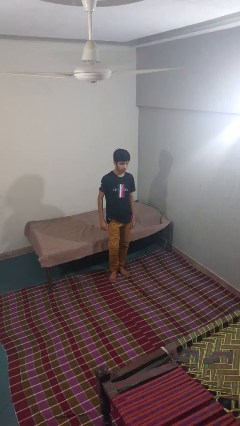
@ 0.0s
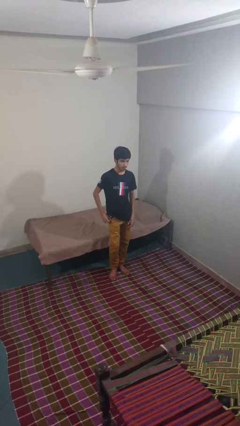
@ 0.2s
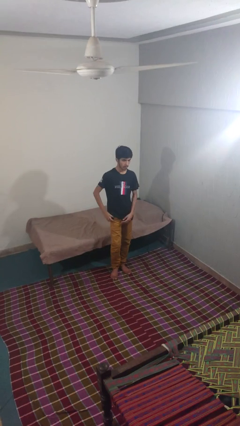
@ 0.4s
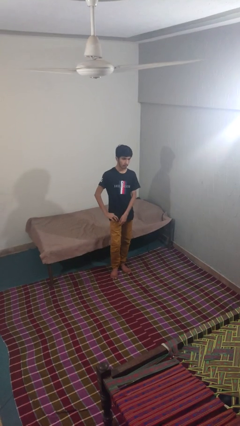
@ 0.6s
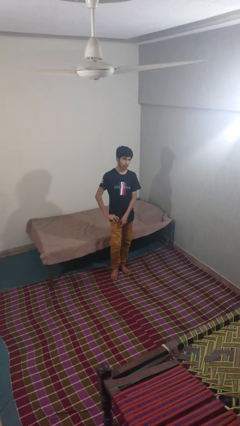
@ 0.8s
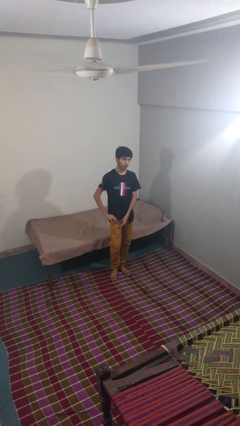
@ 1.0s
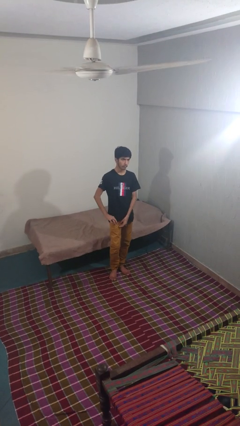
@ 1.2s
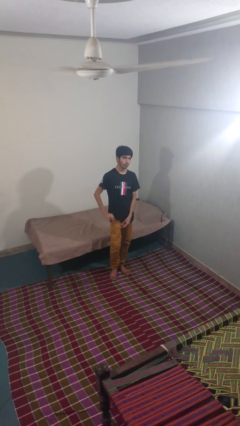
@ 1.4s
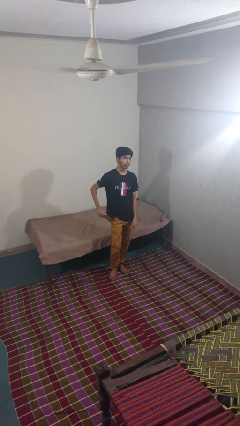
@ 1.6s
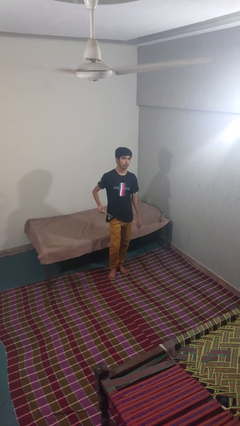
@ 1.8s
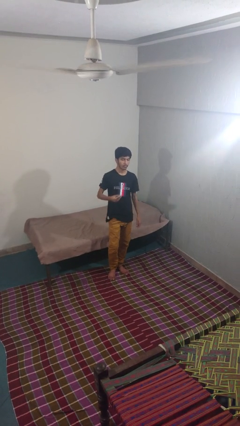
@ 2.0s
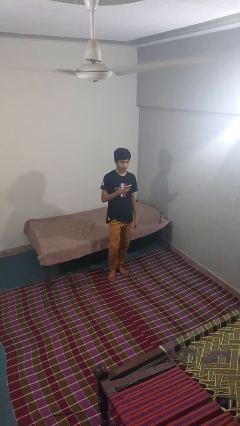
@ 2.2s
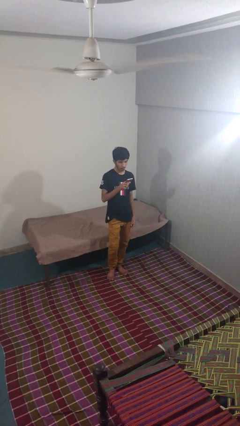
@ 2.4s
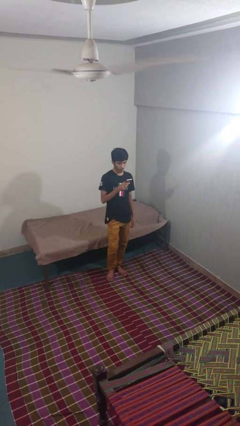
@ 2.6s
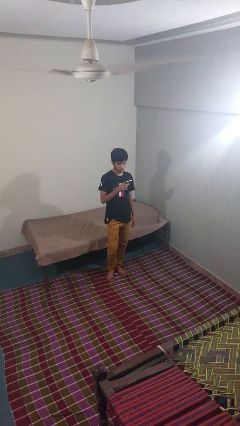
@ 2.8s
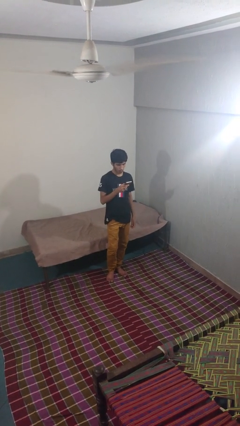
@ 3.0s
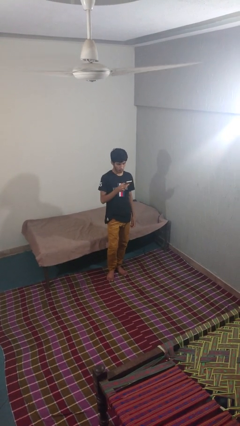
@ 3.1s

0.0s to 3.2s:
person takes phone from pocket

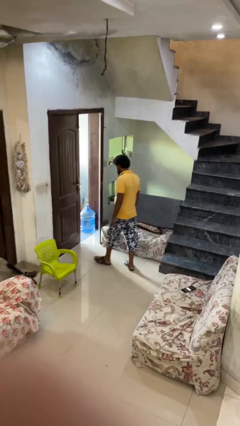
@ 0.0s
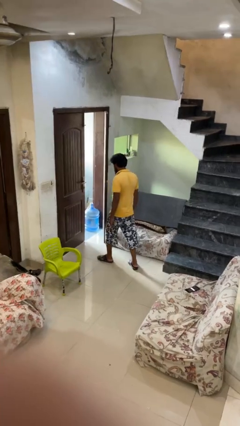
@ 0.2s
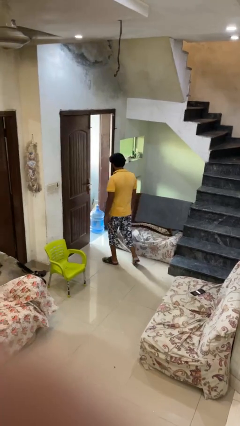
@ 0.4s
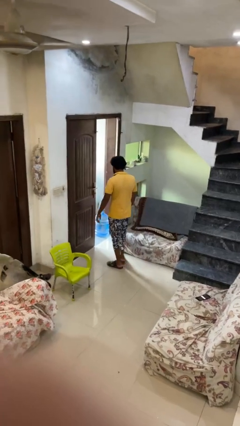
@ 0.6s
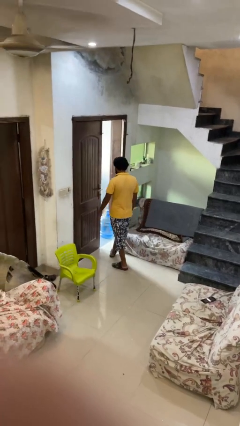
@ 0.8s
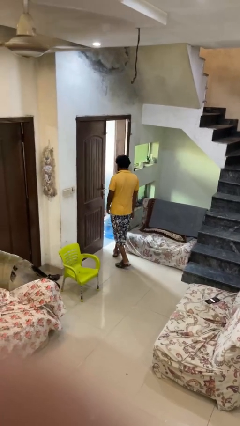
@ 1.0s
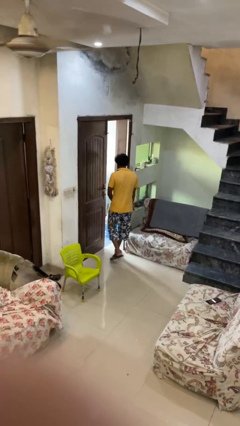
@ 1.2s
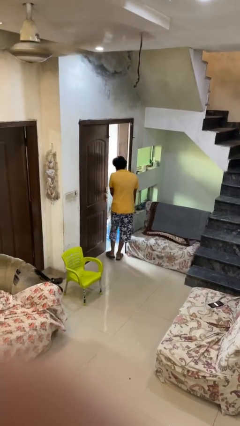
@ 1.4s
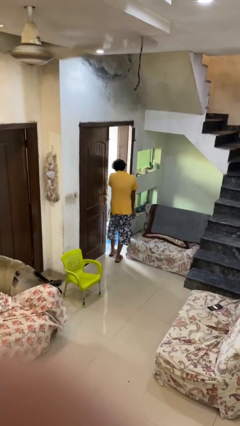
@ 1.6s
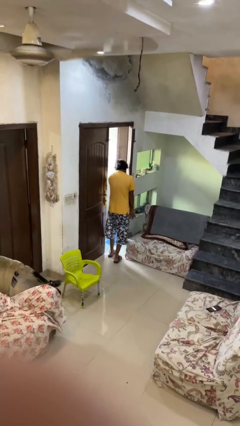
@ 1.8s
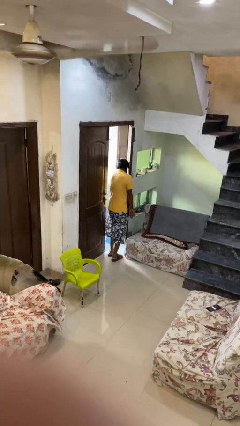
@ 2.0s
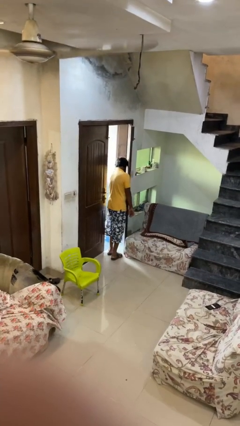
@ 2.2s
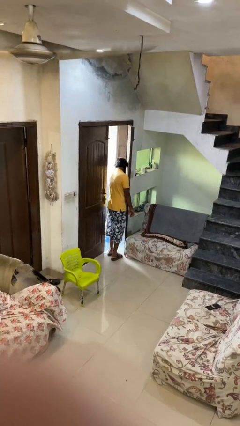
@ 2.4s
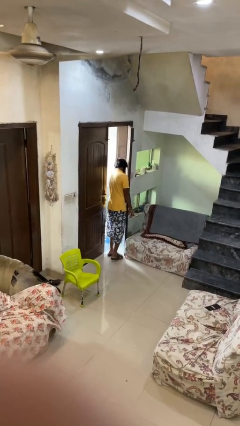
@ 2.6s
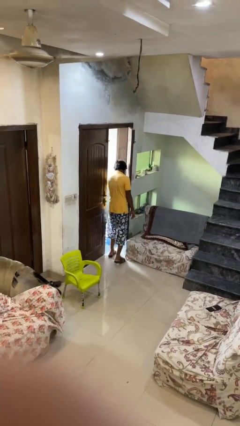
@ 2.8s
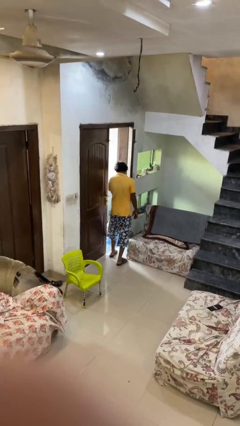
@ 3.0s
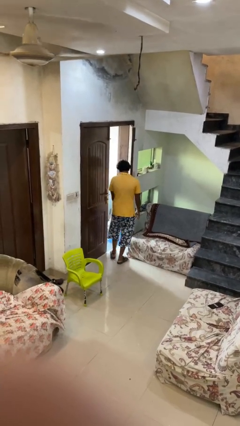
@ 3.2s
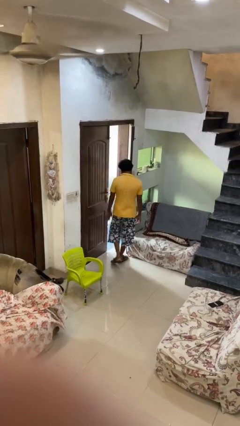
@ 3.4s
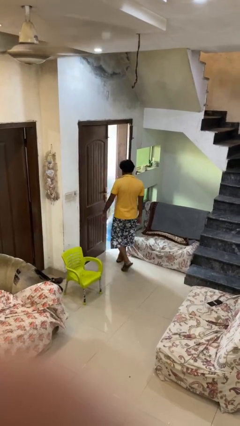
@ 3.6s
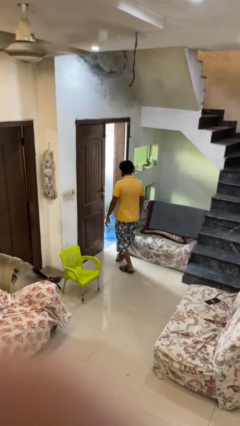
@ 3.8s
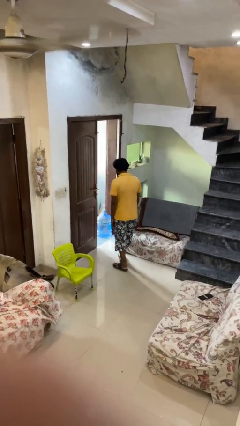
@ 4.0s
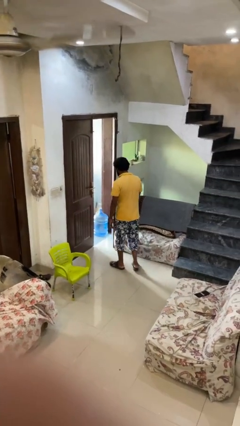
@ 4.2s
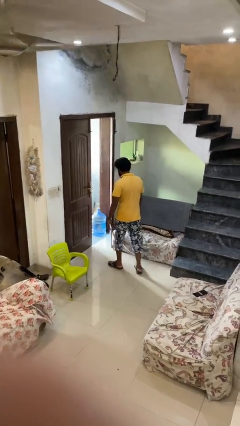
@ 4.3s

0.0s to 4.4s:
person bumps into wall

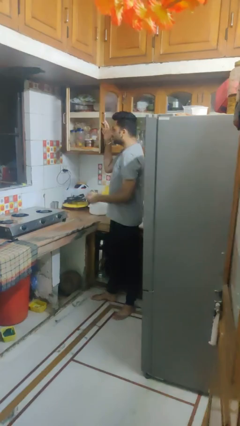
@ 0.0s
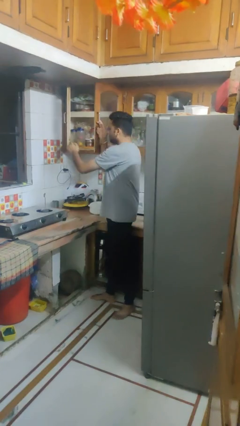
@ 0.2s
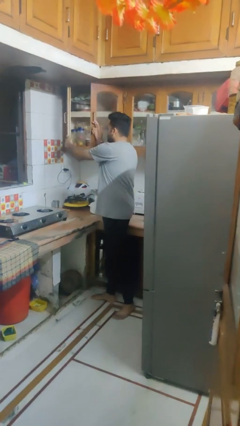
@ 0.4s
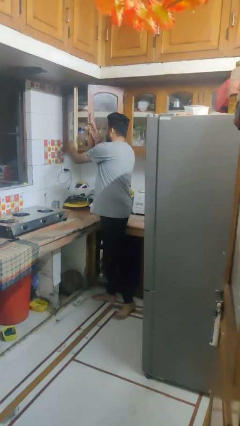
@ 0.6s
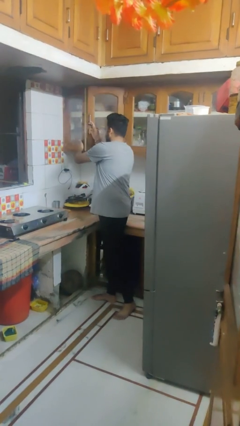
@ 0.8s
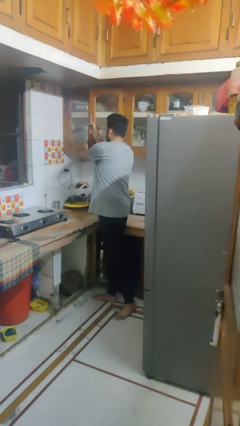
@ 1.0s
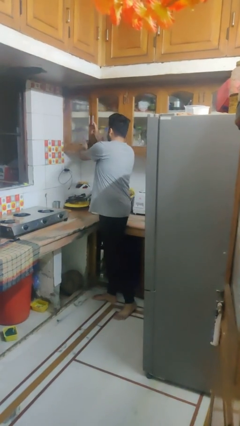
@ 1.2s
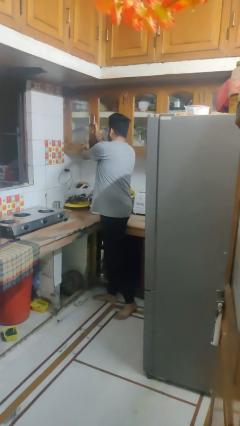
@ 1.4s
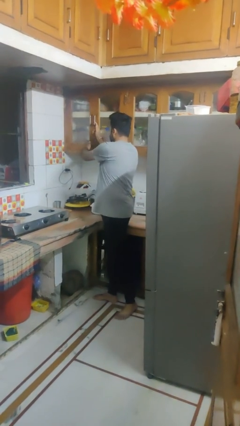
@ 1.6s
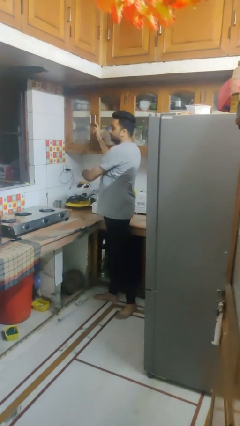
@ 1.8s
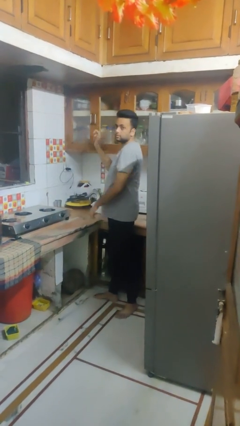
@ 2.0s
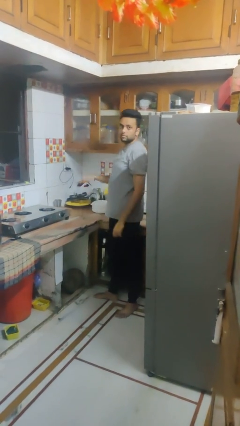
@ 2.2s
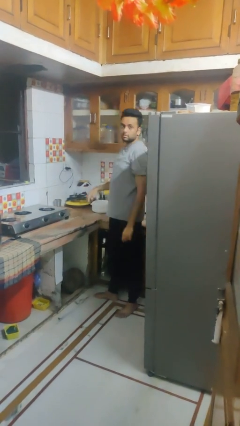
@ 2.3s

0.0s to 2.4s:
person closes cabinet

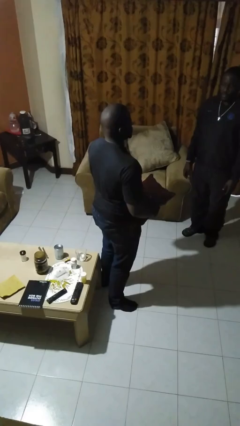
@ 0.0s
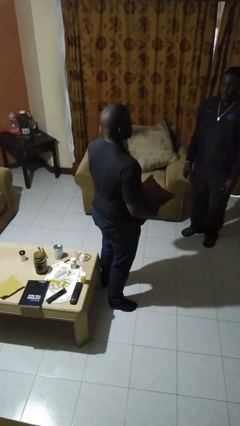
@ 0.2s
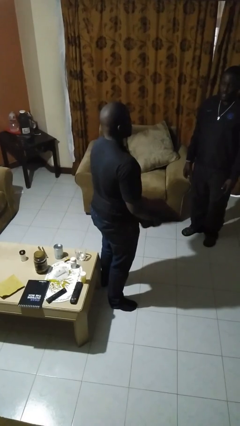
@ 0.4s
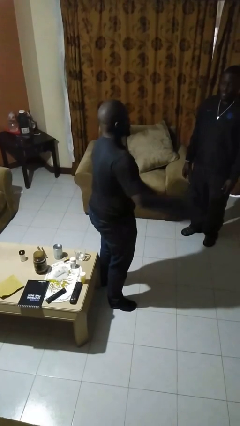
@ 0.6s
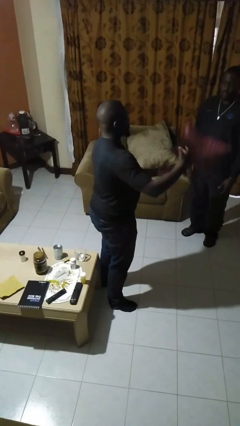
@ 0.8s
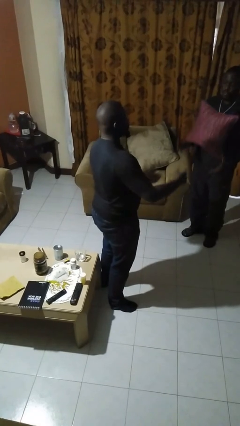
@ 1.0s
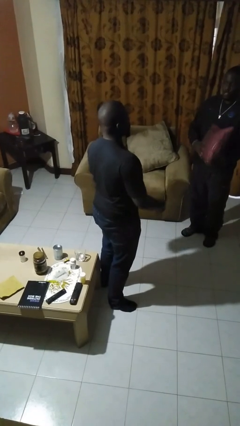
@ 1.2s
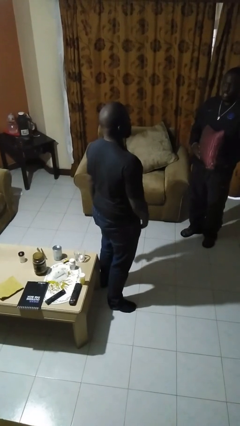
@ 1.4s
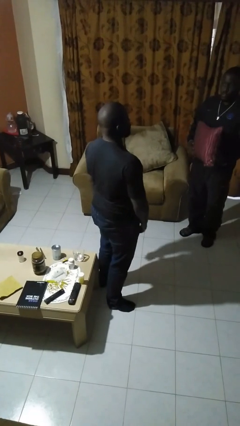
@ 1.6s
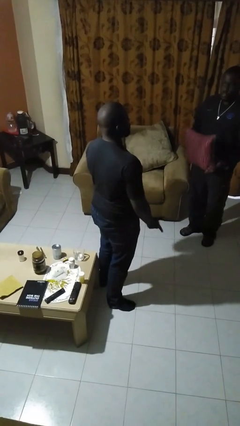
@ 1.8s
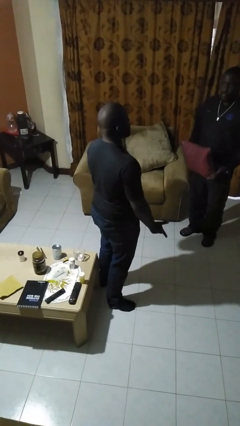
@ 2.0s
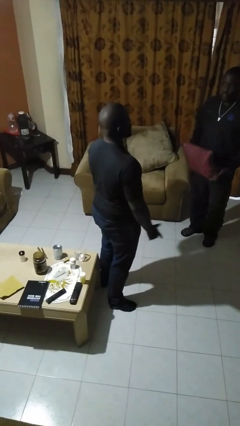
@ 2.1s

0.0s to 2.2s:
person throws object to person

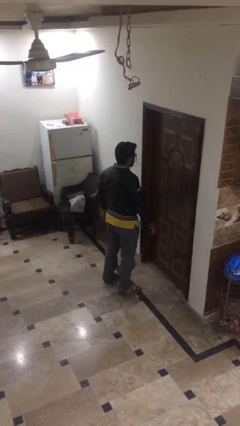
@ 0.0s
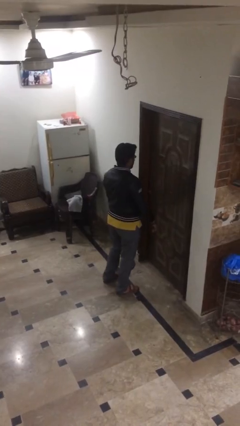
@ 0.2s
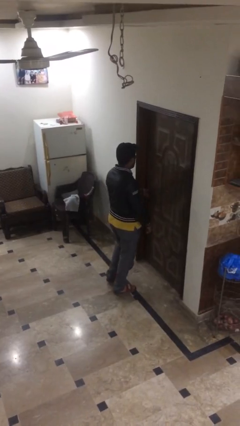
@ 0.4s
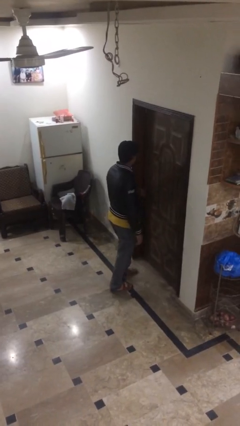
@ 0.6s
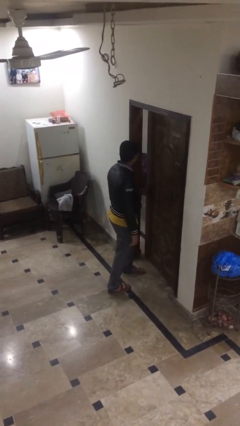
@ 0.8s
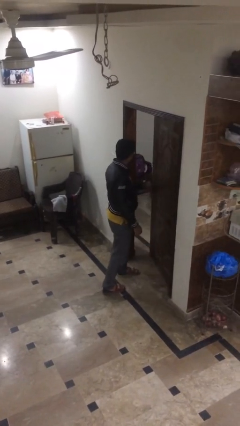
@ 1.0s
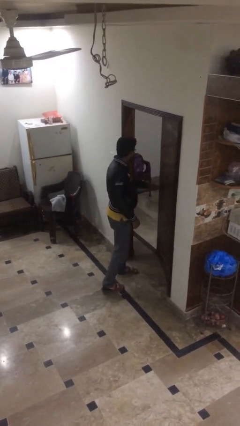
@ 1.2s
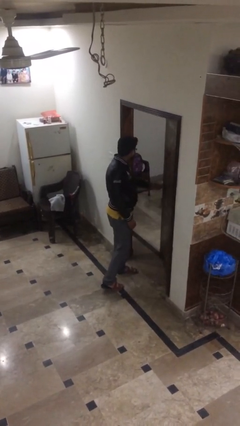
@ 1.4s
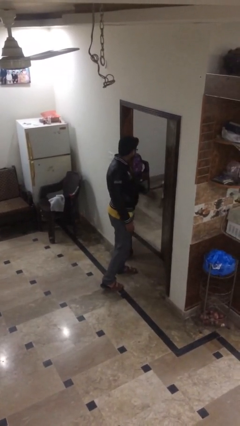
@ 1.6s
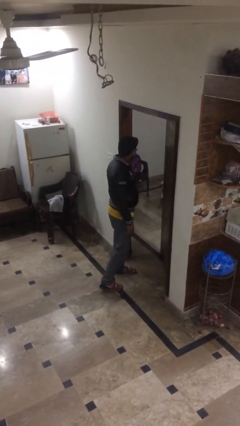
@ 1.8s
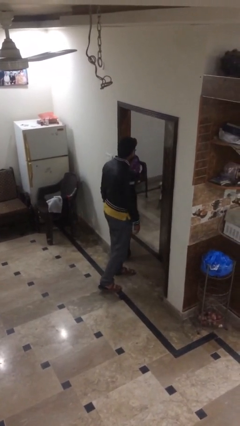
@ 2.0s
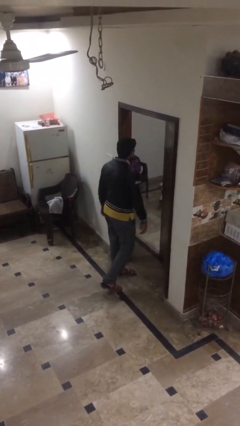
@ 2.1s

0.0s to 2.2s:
person opens facility door

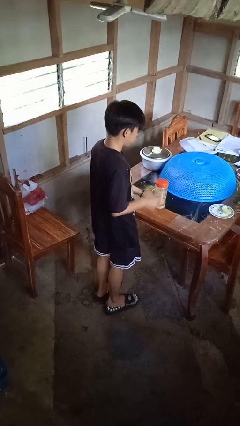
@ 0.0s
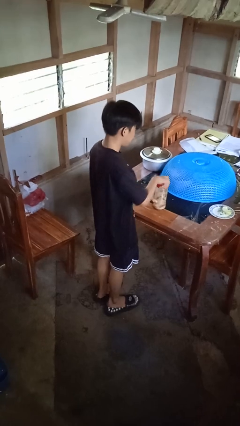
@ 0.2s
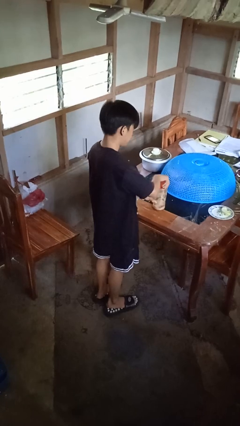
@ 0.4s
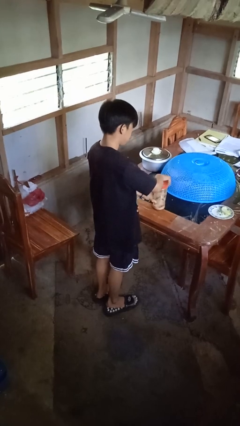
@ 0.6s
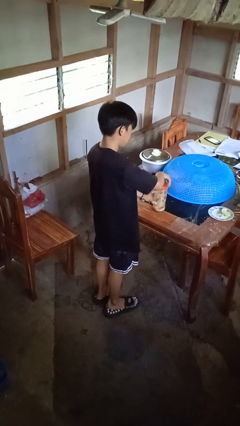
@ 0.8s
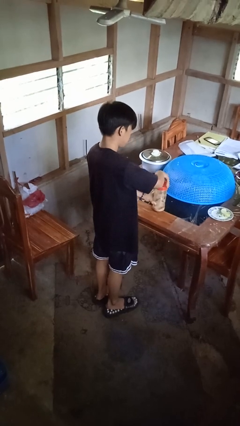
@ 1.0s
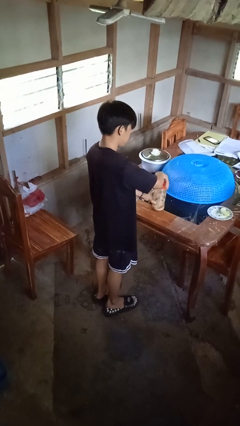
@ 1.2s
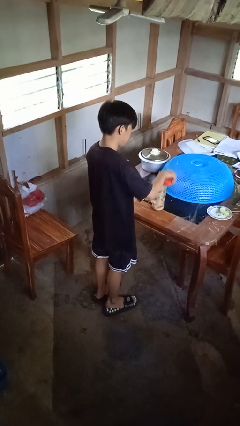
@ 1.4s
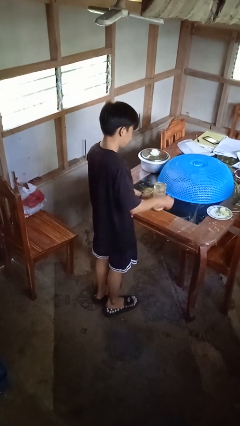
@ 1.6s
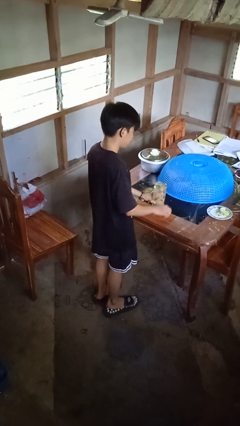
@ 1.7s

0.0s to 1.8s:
person opens jar

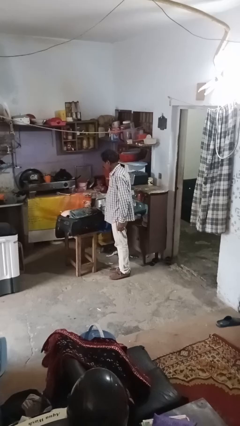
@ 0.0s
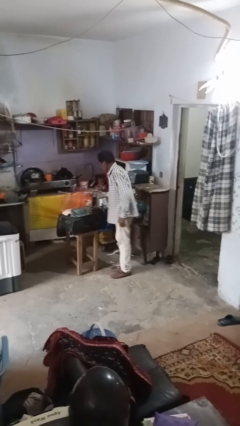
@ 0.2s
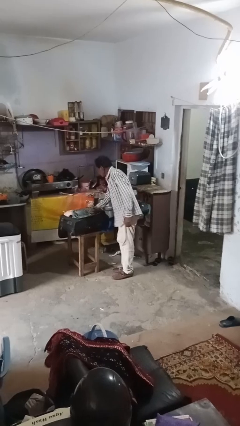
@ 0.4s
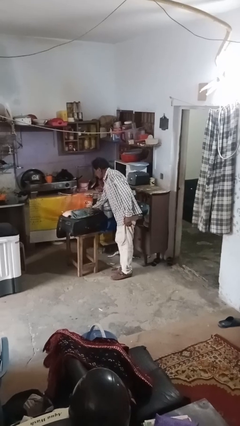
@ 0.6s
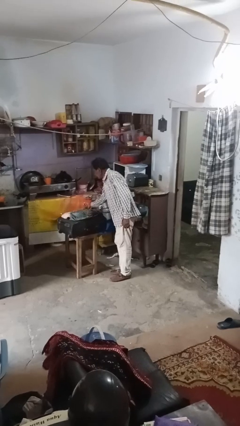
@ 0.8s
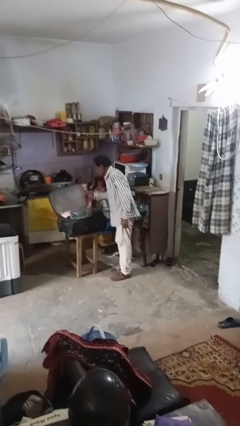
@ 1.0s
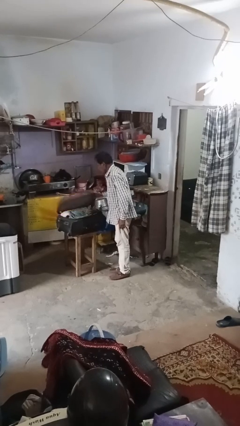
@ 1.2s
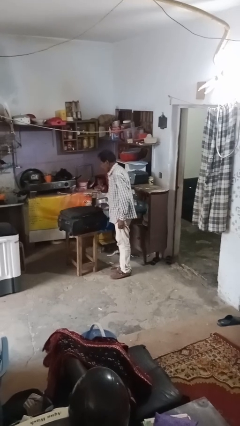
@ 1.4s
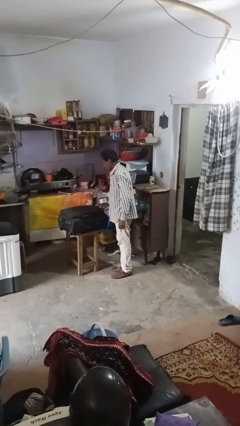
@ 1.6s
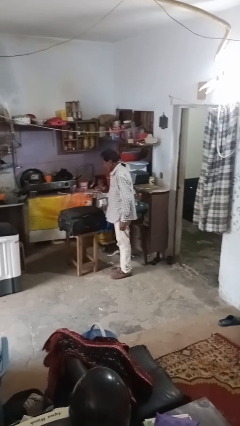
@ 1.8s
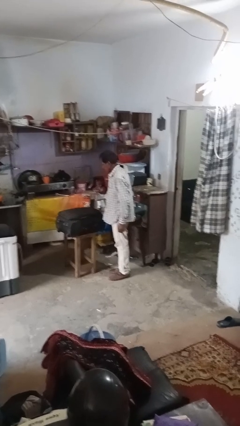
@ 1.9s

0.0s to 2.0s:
person closes suitcase
